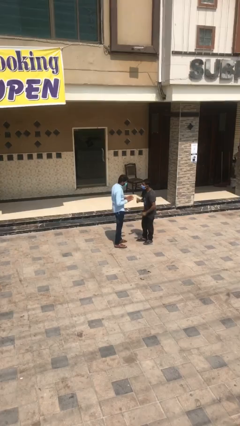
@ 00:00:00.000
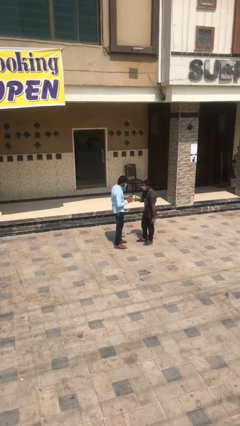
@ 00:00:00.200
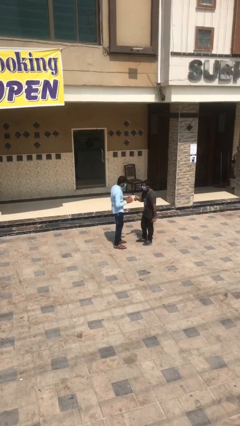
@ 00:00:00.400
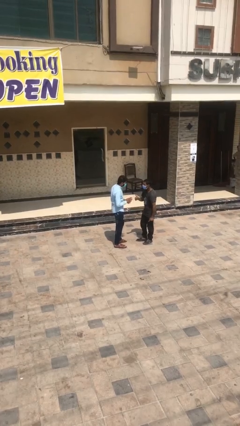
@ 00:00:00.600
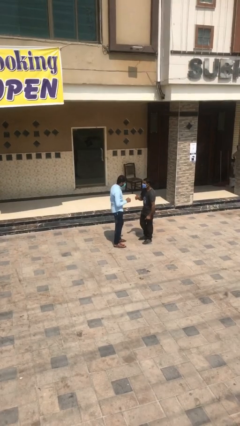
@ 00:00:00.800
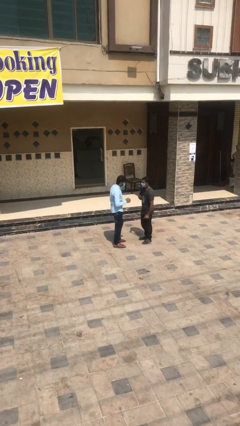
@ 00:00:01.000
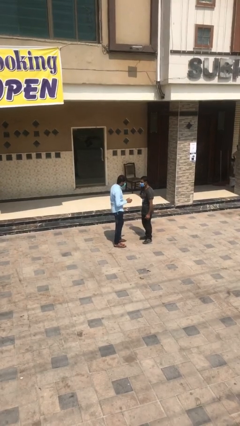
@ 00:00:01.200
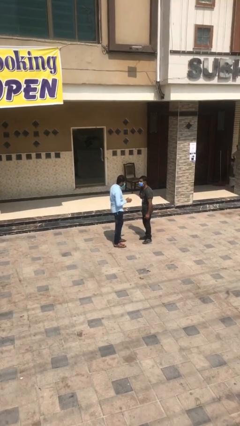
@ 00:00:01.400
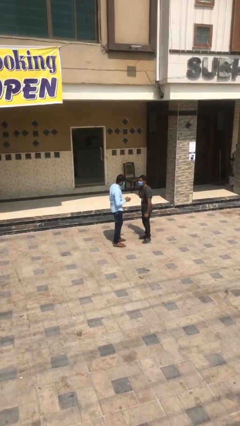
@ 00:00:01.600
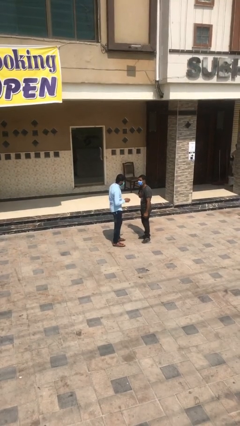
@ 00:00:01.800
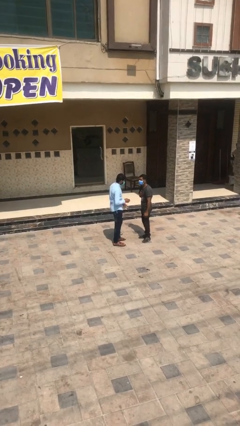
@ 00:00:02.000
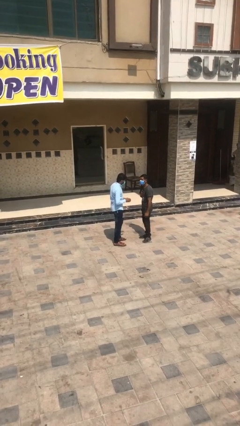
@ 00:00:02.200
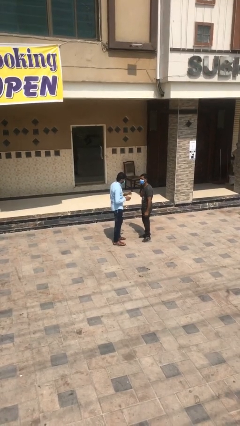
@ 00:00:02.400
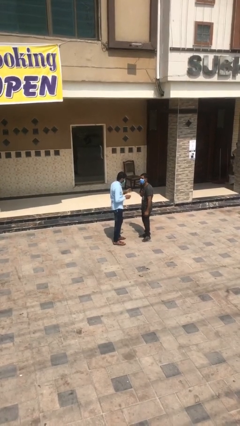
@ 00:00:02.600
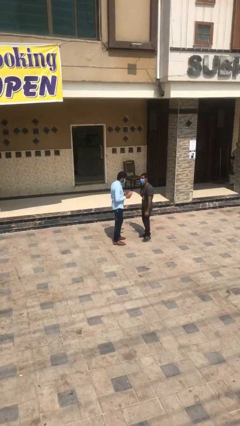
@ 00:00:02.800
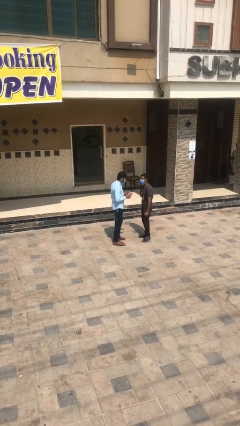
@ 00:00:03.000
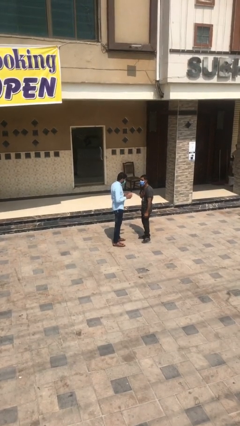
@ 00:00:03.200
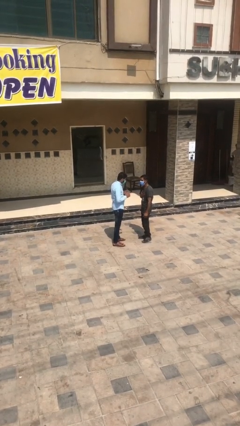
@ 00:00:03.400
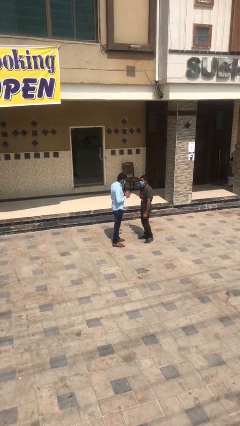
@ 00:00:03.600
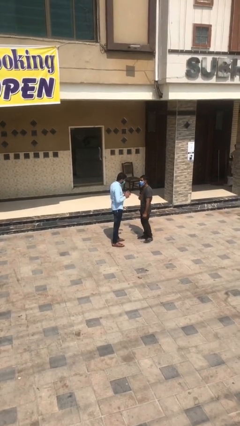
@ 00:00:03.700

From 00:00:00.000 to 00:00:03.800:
person talks to person

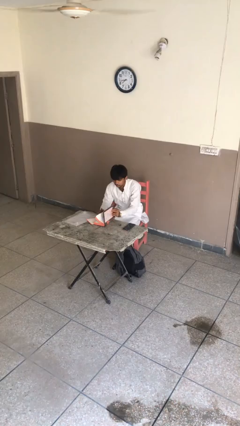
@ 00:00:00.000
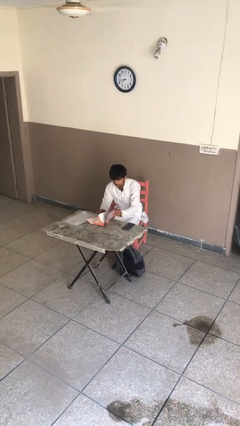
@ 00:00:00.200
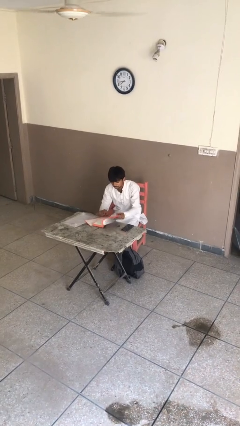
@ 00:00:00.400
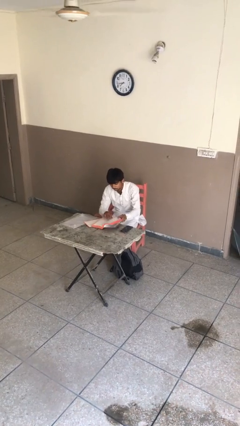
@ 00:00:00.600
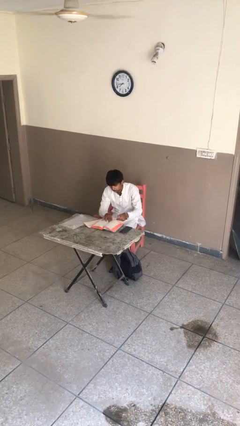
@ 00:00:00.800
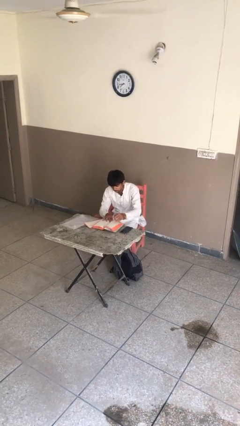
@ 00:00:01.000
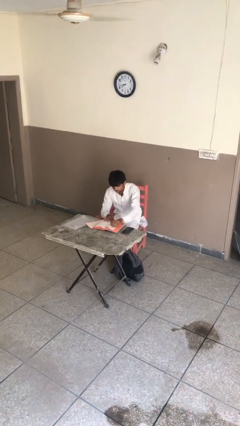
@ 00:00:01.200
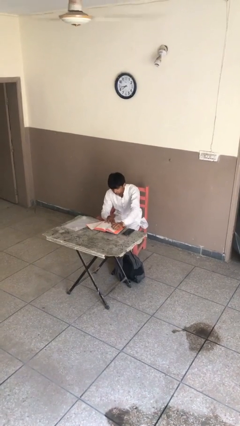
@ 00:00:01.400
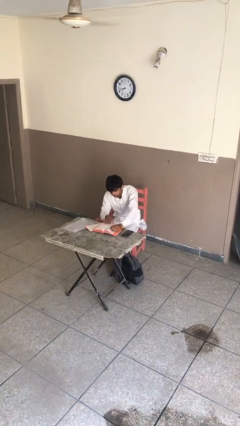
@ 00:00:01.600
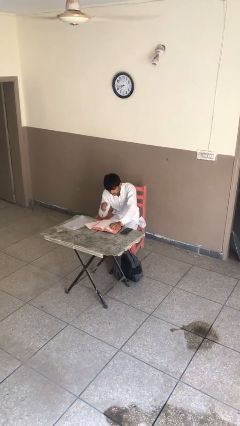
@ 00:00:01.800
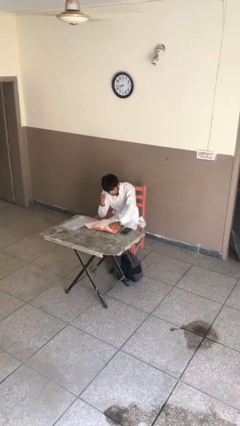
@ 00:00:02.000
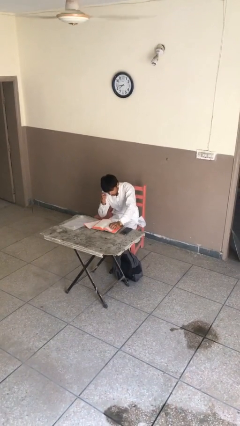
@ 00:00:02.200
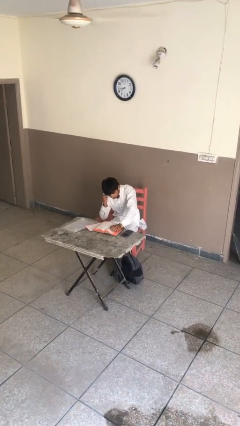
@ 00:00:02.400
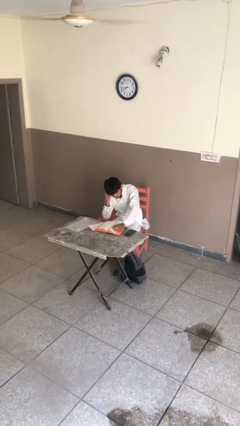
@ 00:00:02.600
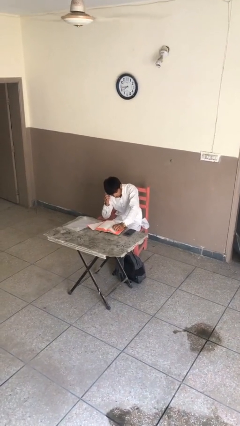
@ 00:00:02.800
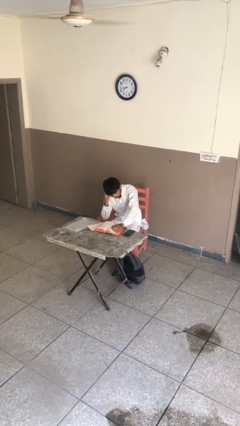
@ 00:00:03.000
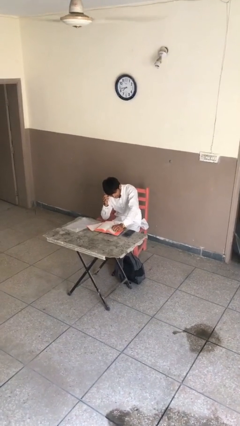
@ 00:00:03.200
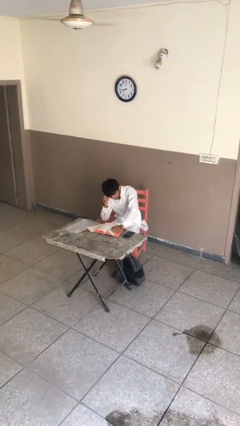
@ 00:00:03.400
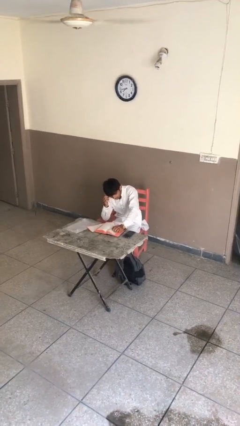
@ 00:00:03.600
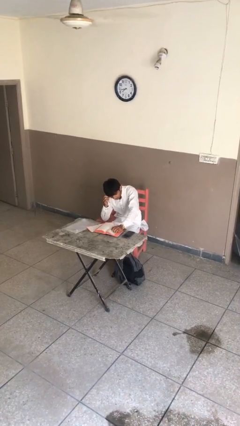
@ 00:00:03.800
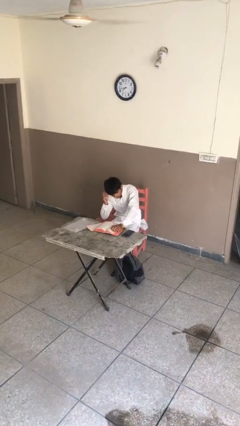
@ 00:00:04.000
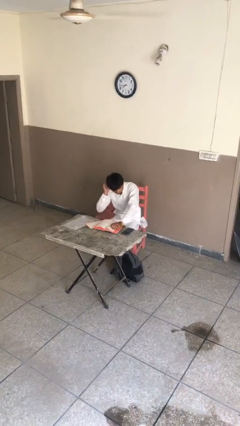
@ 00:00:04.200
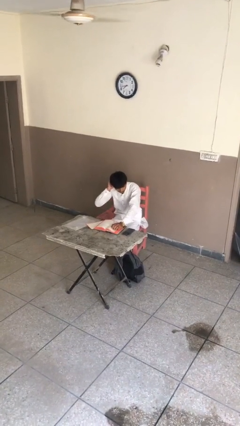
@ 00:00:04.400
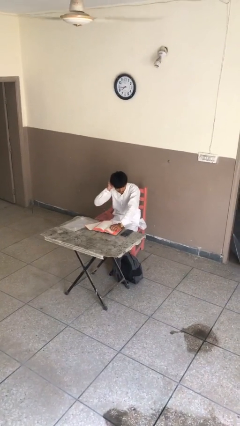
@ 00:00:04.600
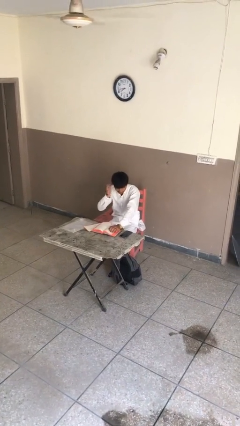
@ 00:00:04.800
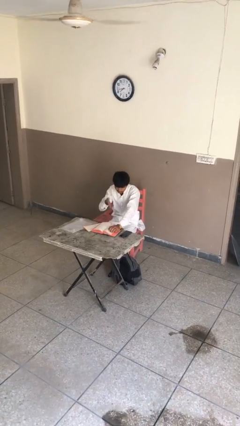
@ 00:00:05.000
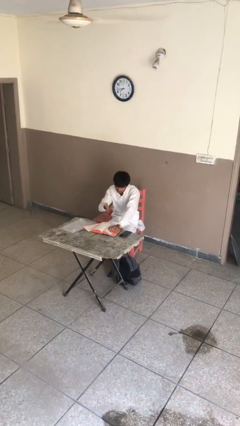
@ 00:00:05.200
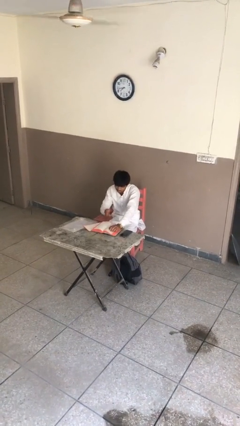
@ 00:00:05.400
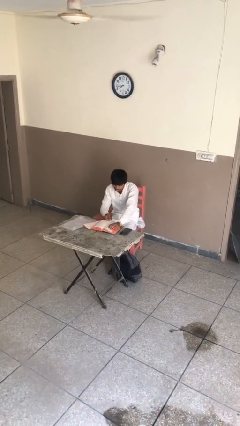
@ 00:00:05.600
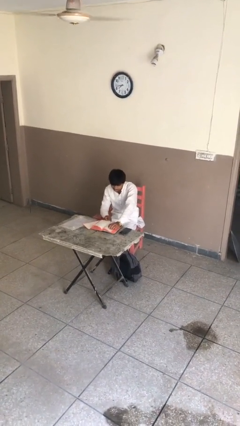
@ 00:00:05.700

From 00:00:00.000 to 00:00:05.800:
person reads document

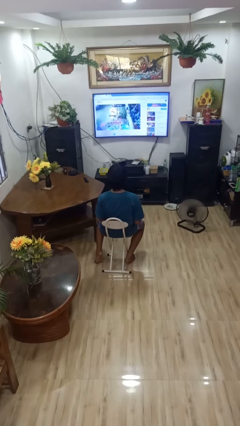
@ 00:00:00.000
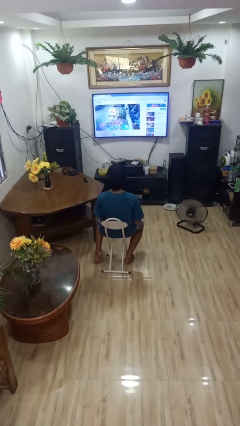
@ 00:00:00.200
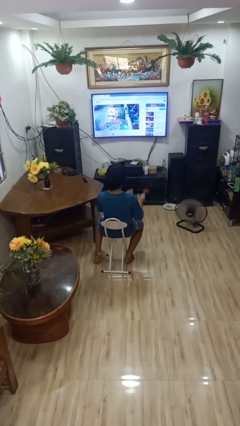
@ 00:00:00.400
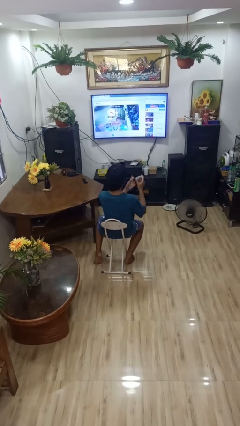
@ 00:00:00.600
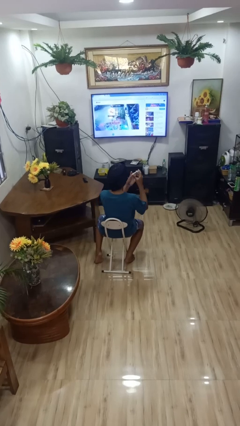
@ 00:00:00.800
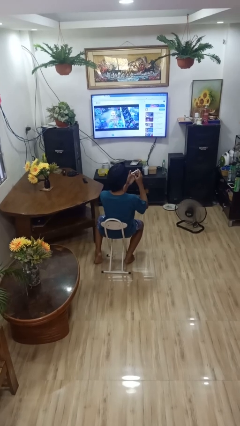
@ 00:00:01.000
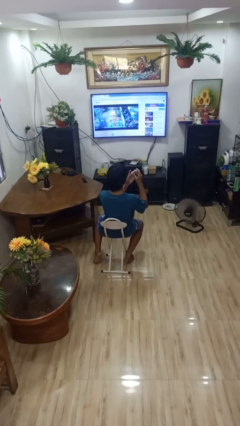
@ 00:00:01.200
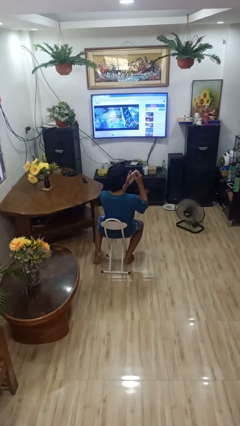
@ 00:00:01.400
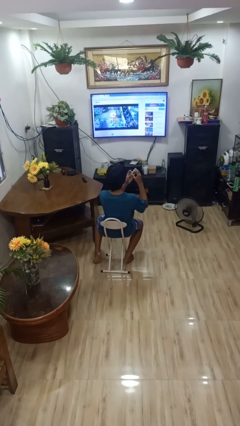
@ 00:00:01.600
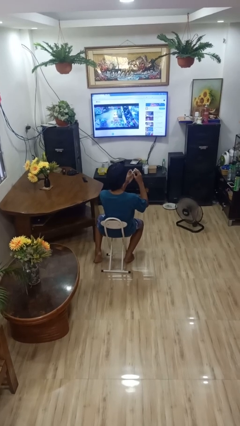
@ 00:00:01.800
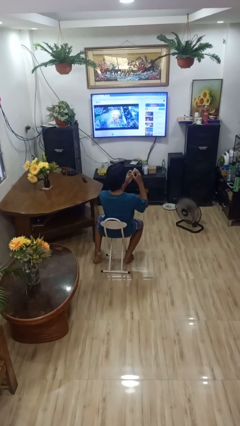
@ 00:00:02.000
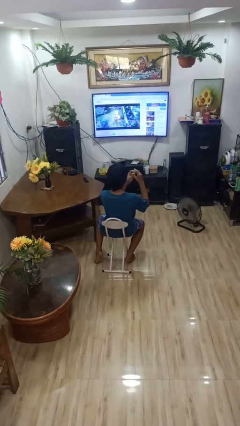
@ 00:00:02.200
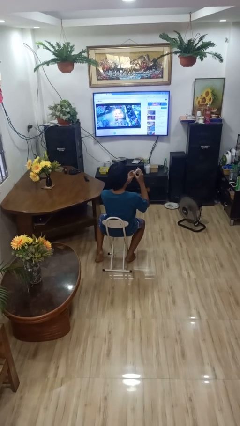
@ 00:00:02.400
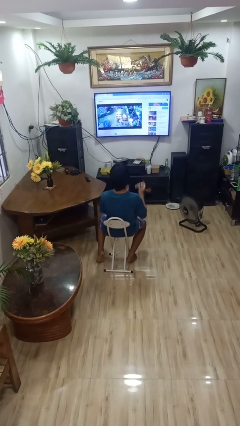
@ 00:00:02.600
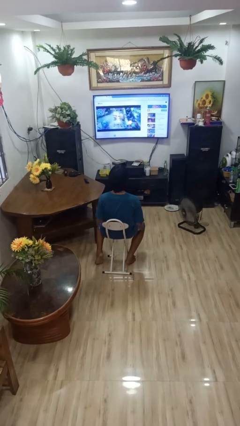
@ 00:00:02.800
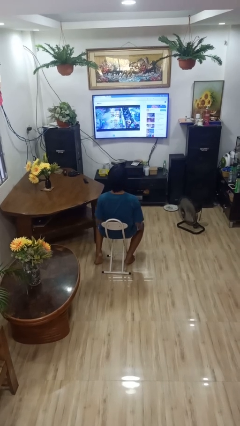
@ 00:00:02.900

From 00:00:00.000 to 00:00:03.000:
person clips fingernails

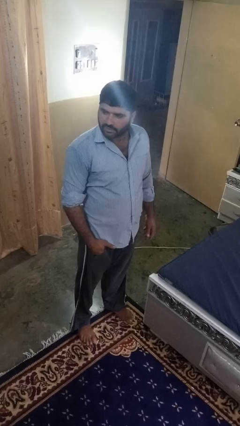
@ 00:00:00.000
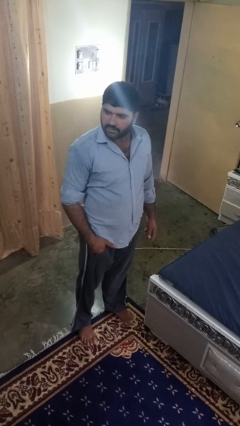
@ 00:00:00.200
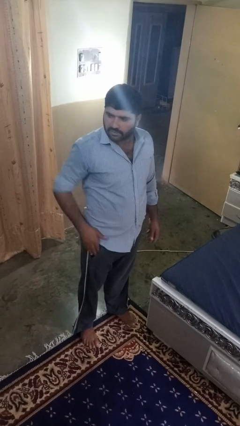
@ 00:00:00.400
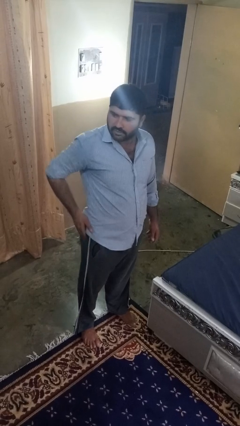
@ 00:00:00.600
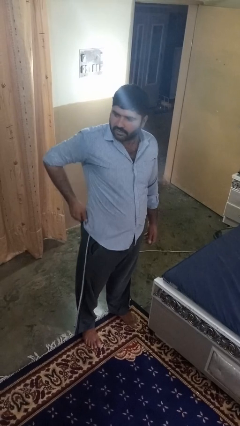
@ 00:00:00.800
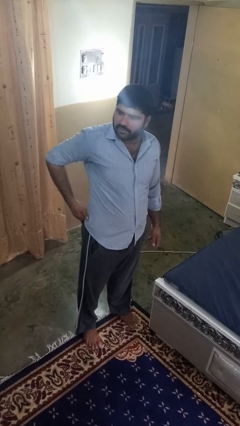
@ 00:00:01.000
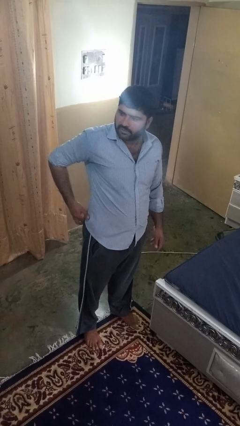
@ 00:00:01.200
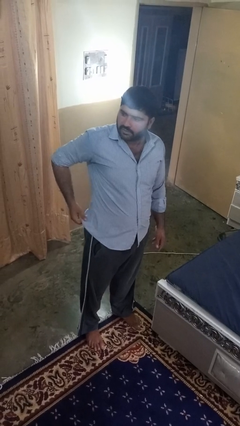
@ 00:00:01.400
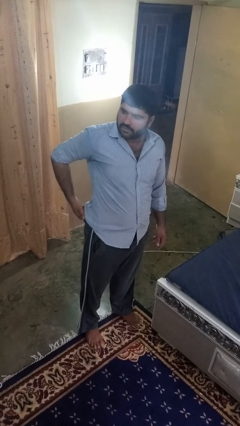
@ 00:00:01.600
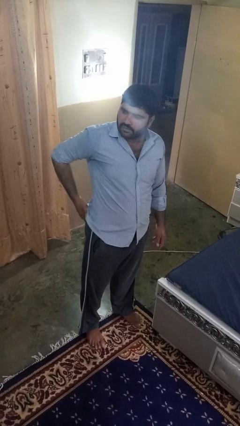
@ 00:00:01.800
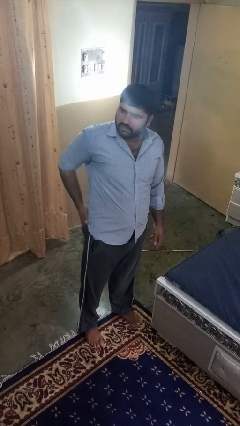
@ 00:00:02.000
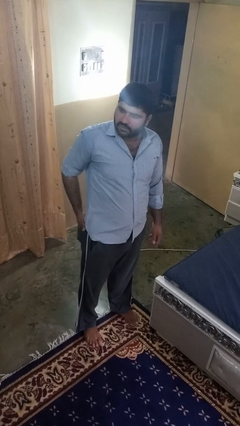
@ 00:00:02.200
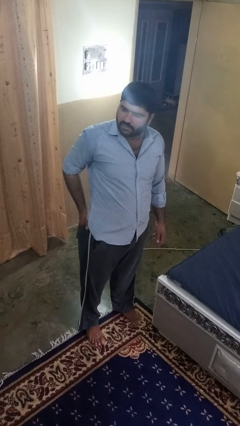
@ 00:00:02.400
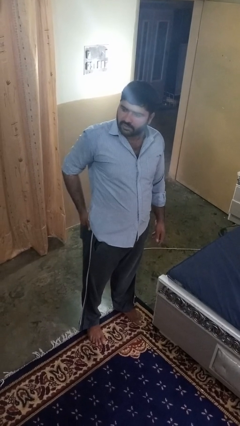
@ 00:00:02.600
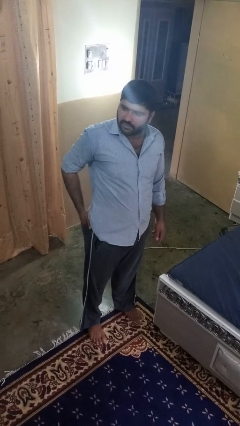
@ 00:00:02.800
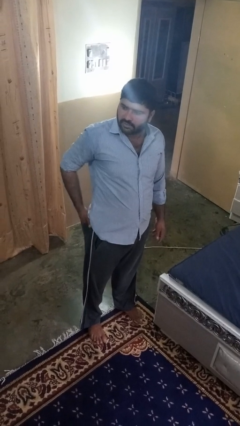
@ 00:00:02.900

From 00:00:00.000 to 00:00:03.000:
person puts hands in back pockets

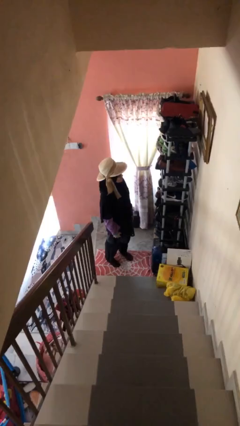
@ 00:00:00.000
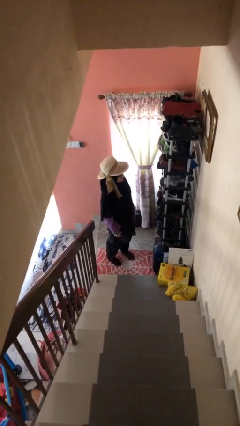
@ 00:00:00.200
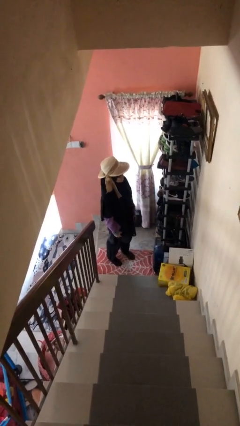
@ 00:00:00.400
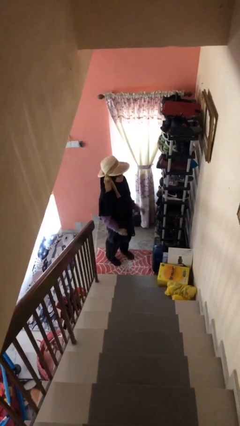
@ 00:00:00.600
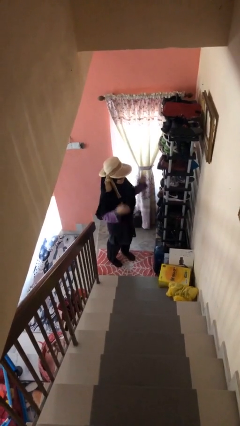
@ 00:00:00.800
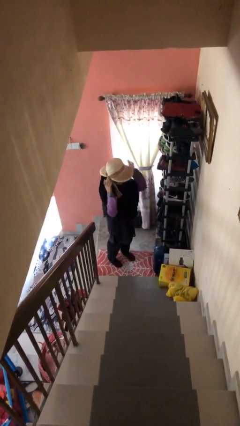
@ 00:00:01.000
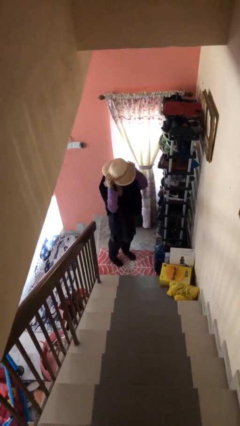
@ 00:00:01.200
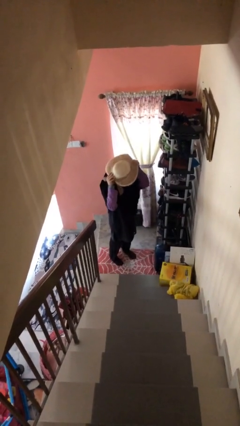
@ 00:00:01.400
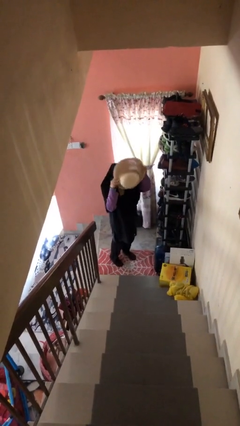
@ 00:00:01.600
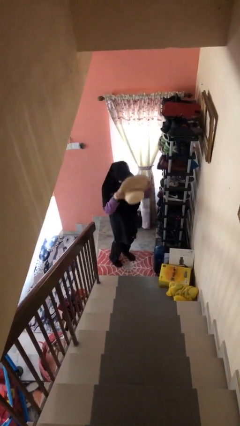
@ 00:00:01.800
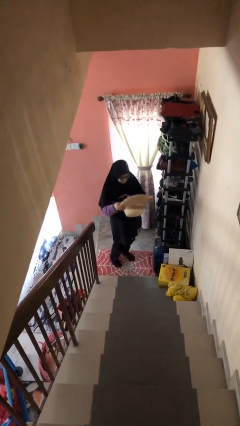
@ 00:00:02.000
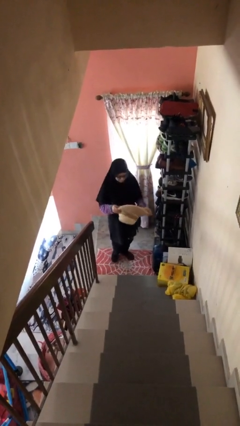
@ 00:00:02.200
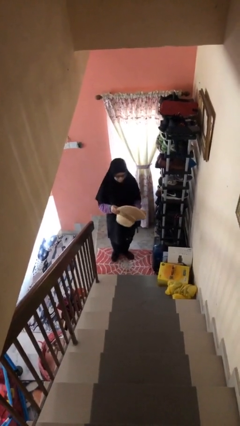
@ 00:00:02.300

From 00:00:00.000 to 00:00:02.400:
person takes off hat
